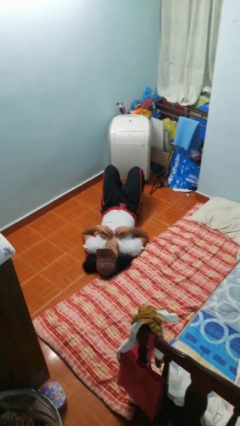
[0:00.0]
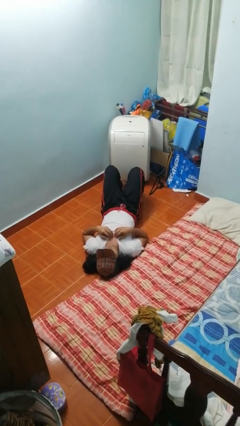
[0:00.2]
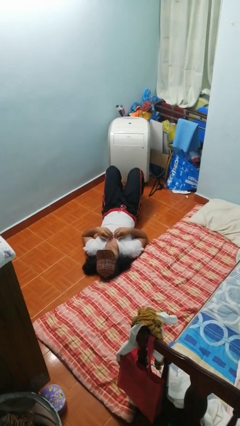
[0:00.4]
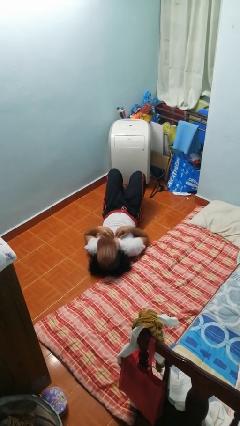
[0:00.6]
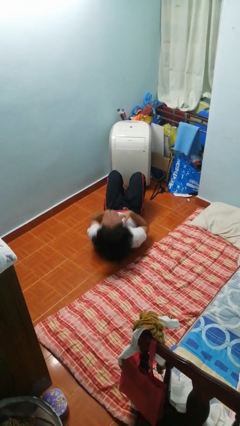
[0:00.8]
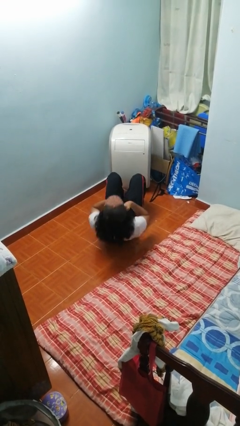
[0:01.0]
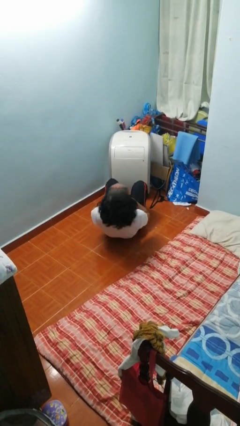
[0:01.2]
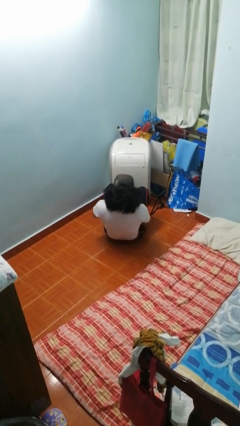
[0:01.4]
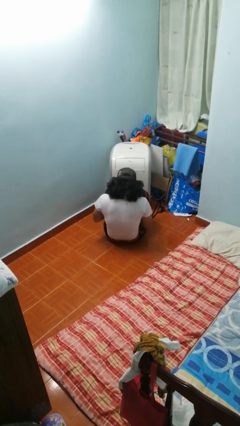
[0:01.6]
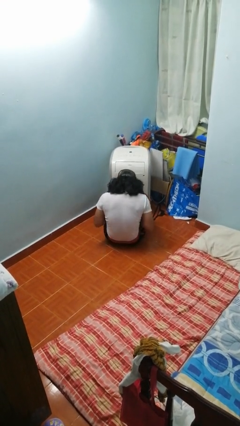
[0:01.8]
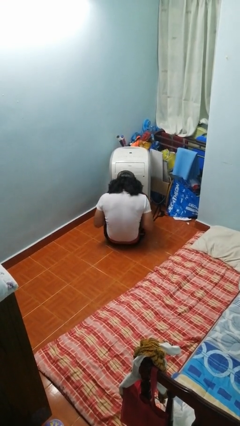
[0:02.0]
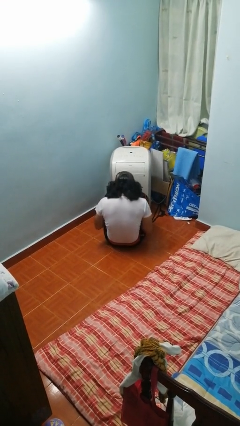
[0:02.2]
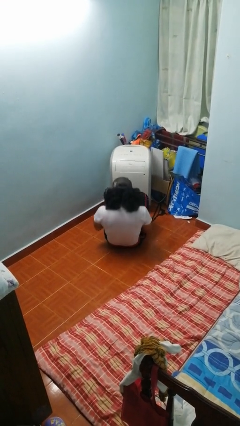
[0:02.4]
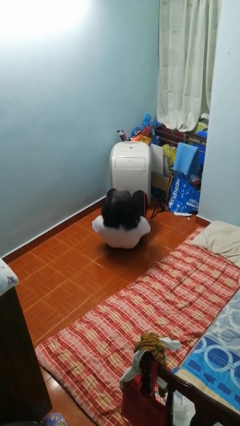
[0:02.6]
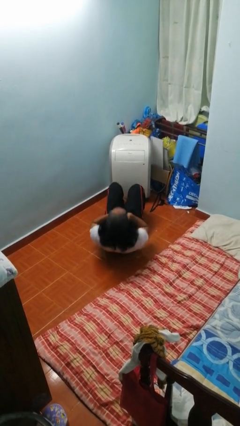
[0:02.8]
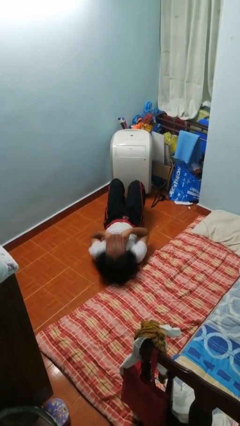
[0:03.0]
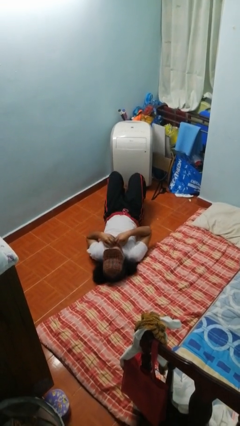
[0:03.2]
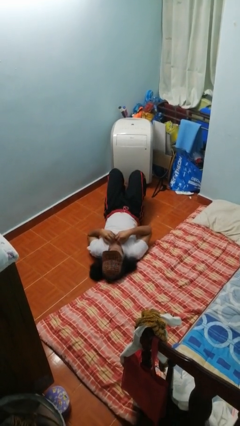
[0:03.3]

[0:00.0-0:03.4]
person exercises with situp

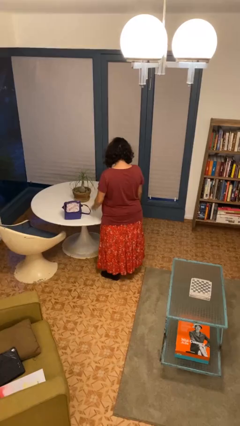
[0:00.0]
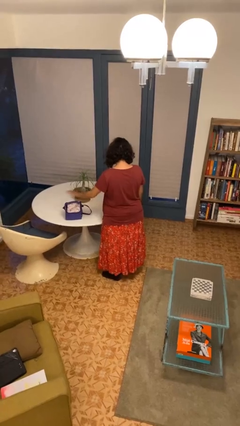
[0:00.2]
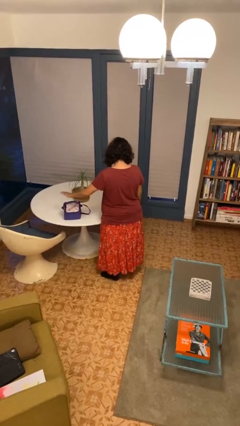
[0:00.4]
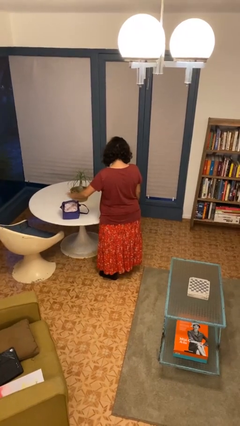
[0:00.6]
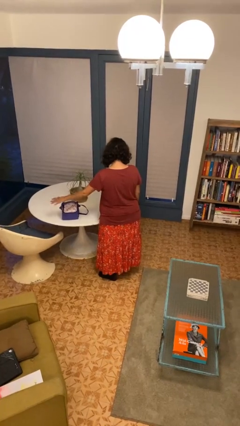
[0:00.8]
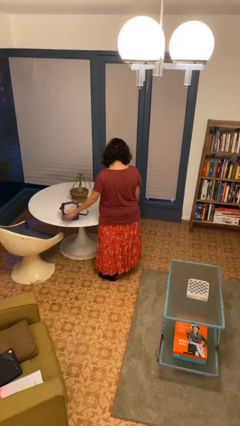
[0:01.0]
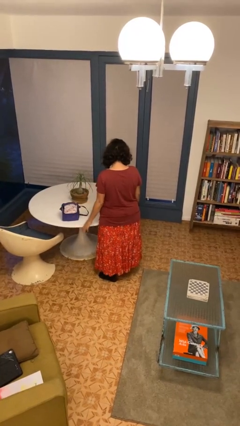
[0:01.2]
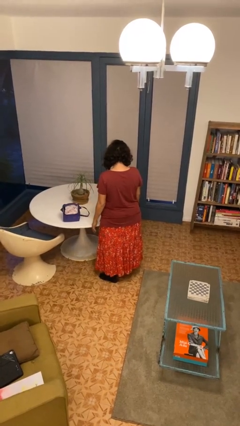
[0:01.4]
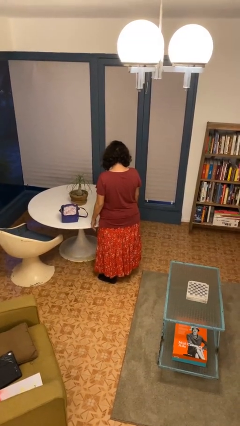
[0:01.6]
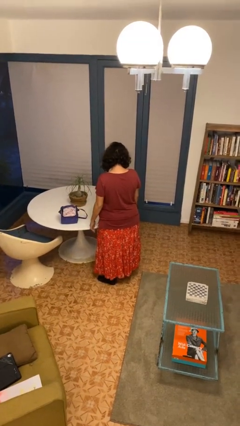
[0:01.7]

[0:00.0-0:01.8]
person waves hand over object

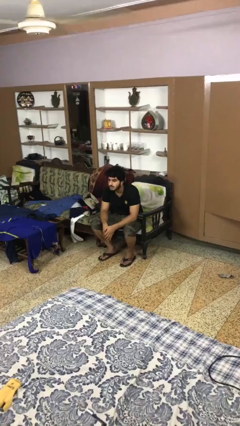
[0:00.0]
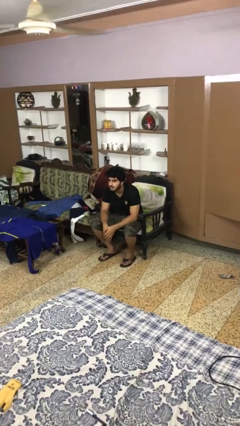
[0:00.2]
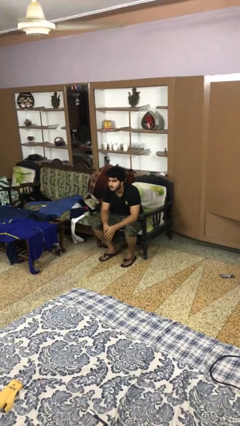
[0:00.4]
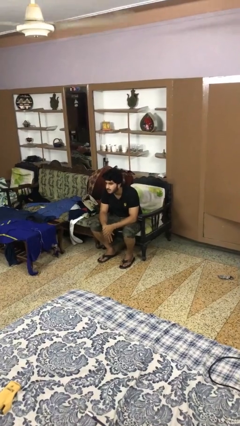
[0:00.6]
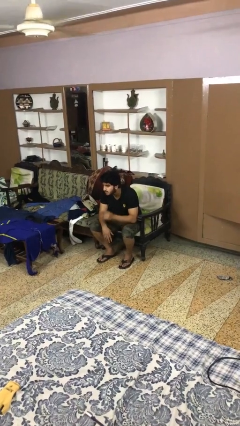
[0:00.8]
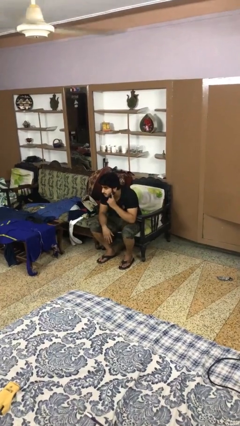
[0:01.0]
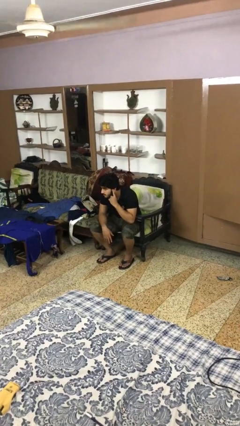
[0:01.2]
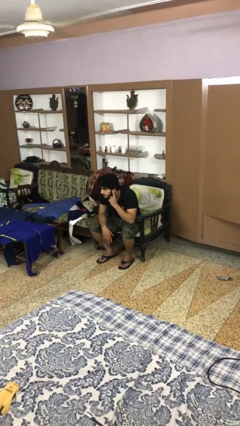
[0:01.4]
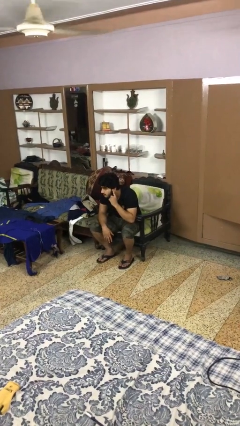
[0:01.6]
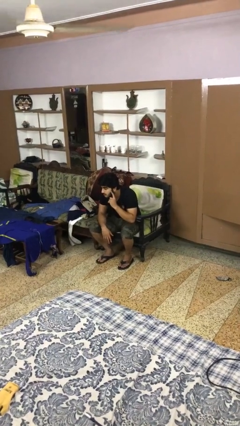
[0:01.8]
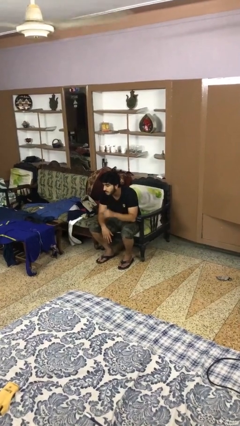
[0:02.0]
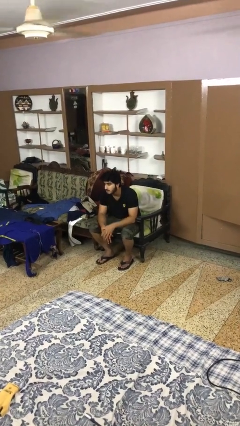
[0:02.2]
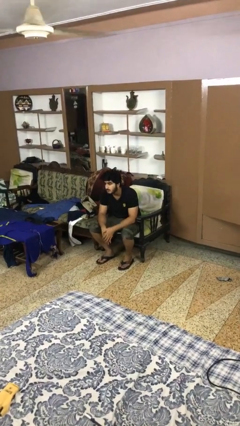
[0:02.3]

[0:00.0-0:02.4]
person gestures listen closely

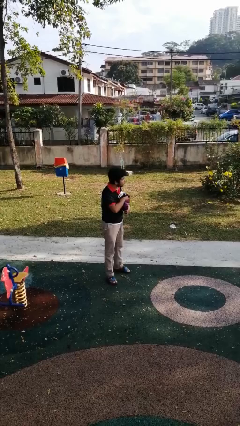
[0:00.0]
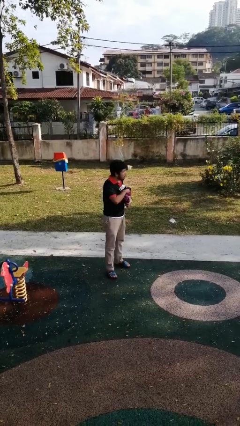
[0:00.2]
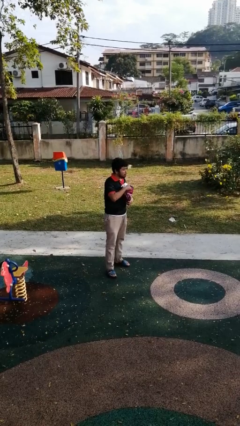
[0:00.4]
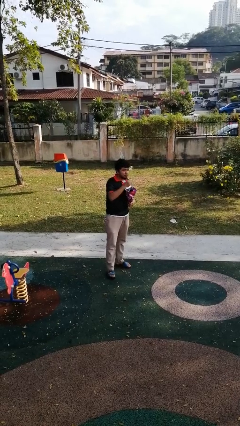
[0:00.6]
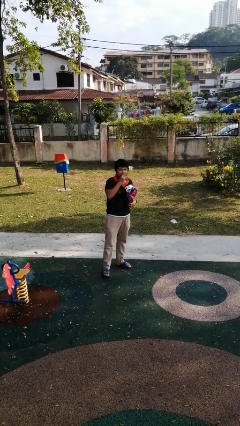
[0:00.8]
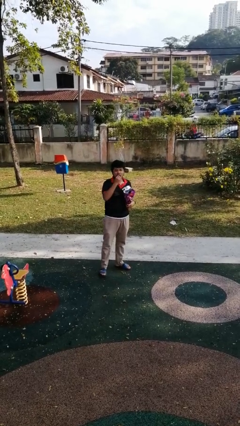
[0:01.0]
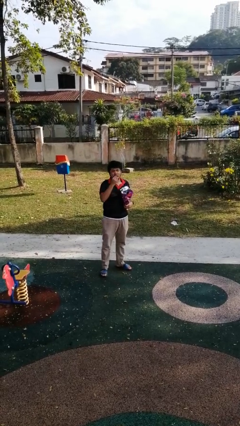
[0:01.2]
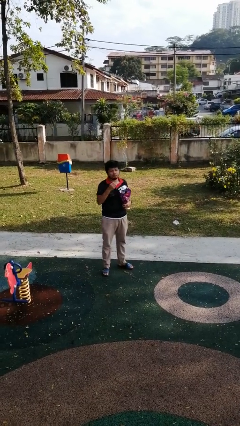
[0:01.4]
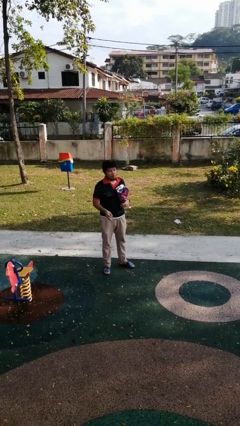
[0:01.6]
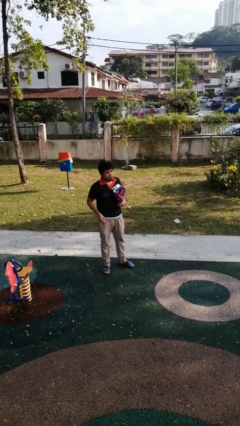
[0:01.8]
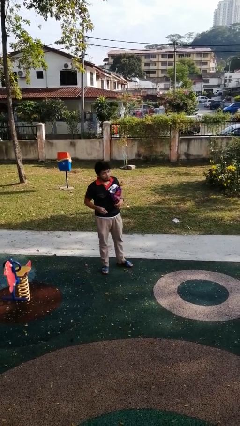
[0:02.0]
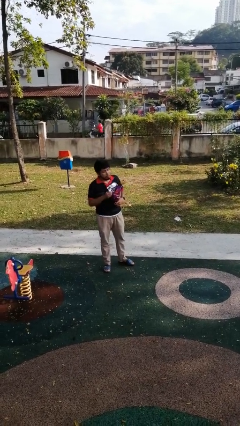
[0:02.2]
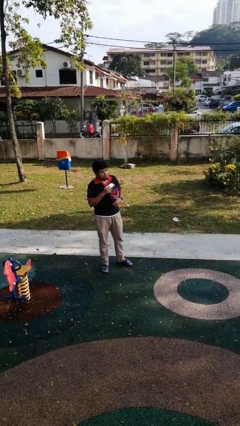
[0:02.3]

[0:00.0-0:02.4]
person eats snack from bag

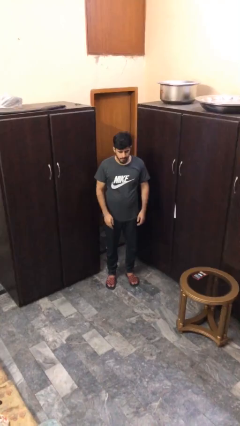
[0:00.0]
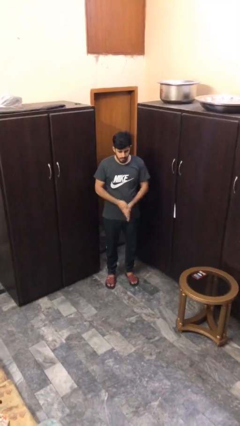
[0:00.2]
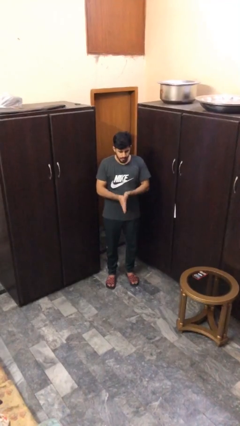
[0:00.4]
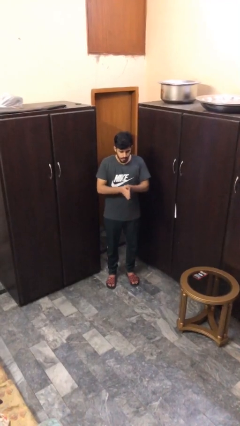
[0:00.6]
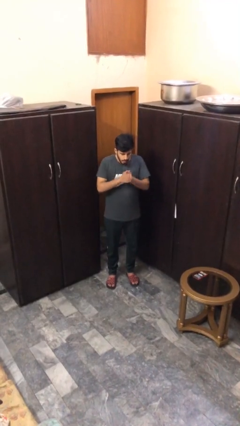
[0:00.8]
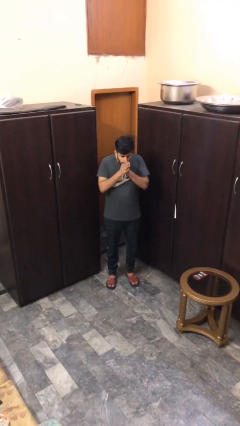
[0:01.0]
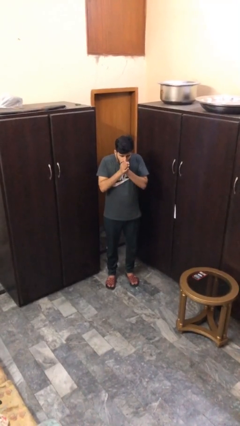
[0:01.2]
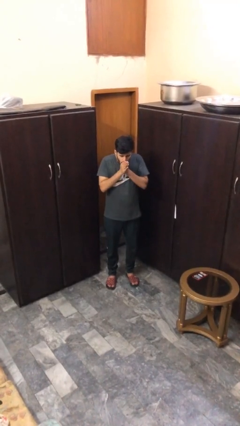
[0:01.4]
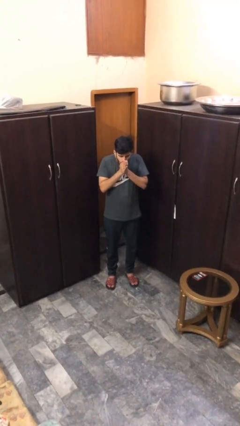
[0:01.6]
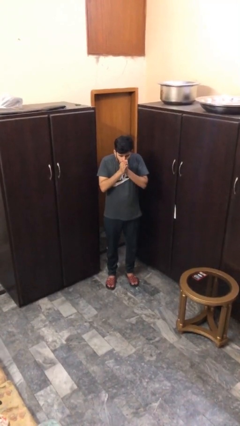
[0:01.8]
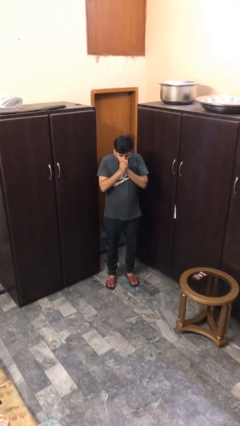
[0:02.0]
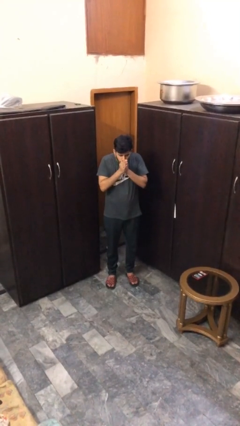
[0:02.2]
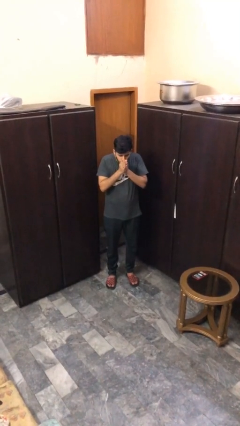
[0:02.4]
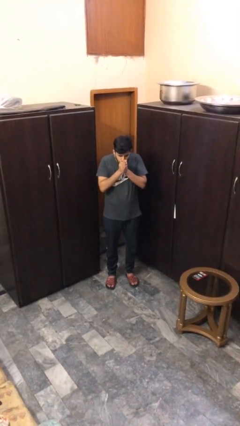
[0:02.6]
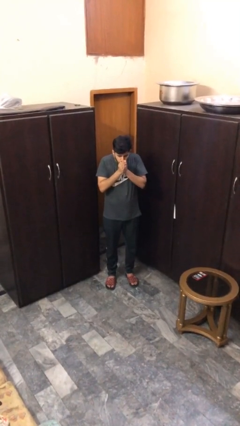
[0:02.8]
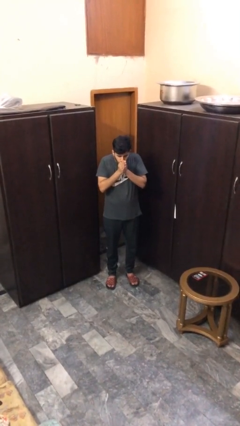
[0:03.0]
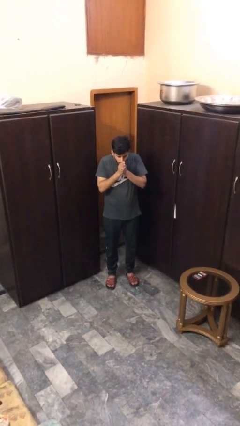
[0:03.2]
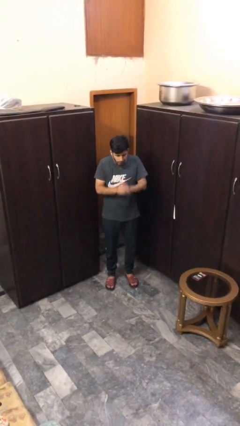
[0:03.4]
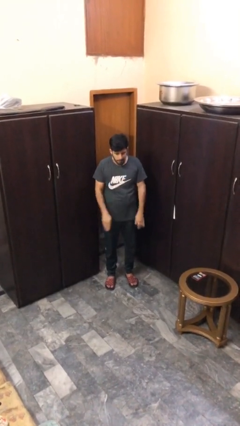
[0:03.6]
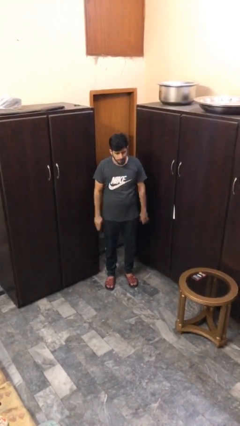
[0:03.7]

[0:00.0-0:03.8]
person blows into hands

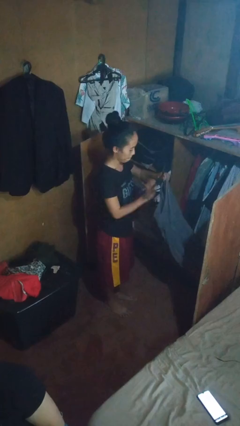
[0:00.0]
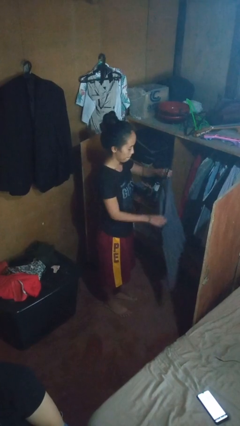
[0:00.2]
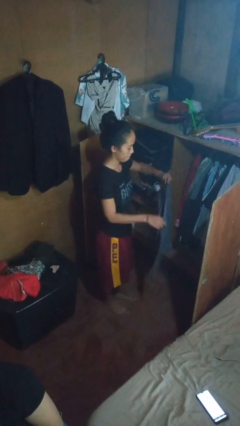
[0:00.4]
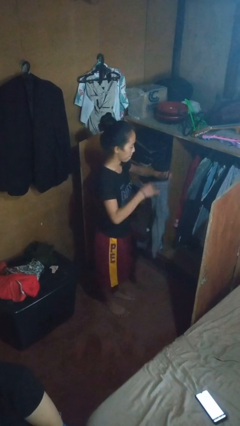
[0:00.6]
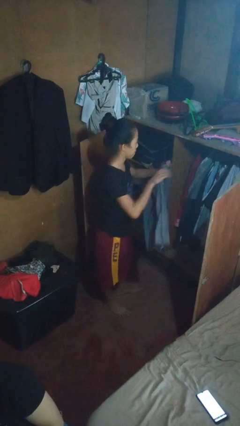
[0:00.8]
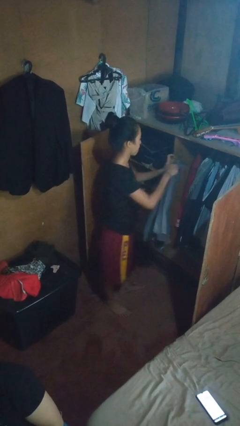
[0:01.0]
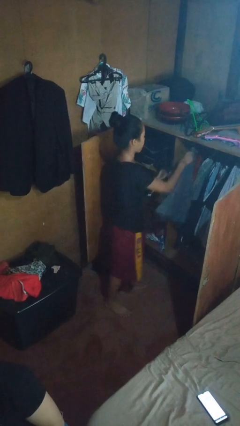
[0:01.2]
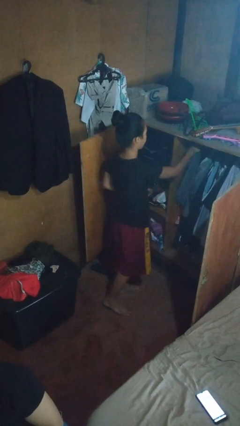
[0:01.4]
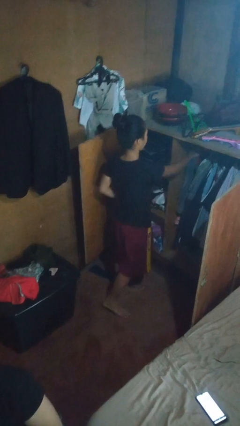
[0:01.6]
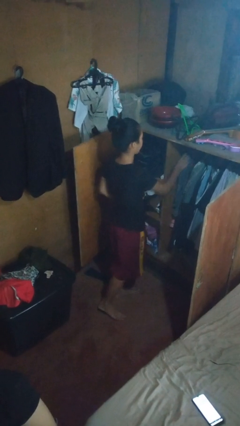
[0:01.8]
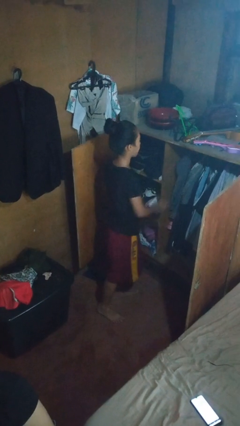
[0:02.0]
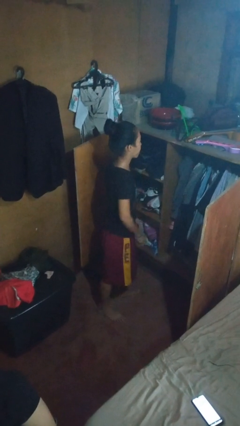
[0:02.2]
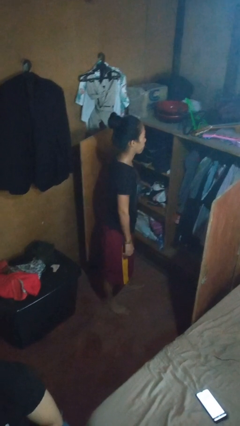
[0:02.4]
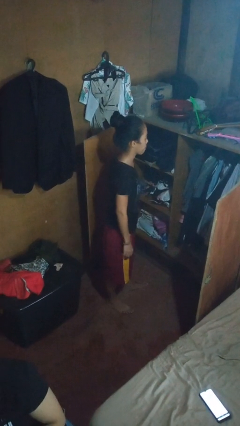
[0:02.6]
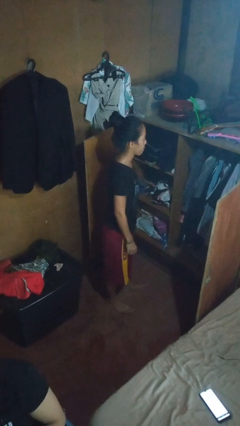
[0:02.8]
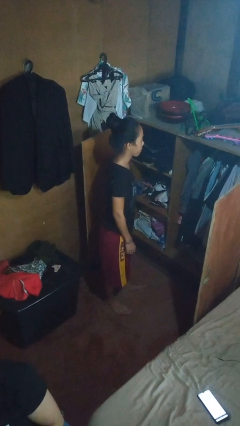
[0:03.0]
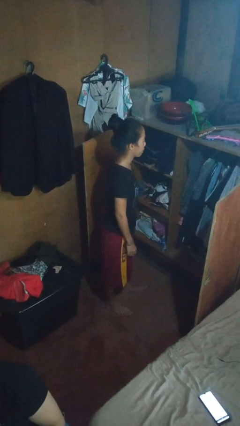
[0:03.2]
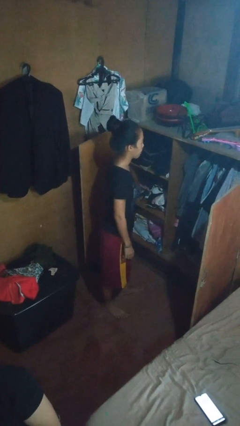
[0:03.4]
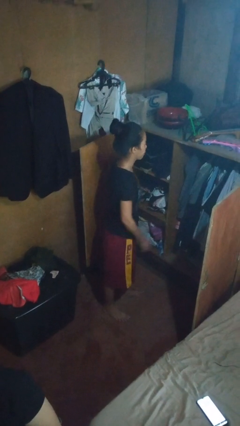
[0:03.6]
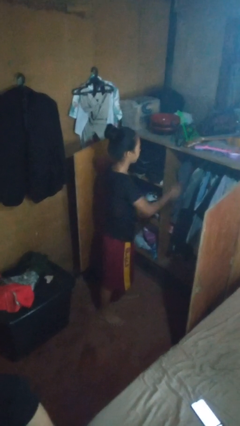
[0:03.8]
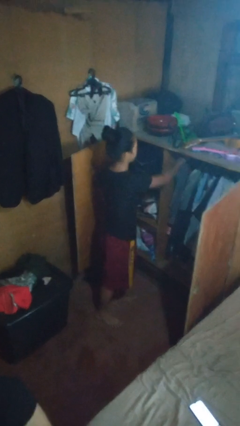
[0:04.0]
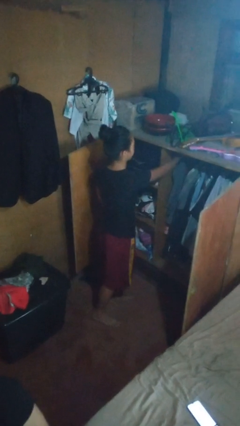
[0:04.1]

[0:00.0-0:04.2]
person puts clothes into closet
